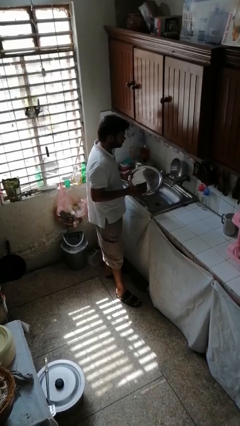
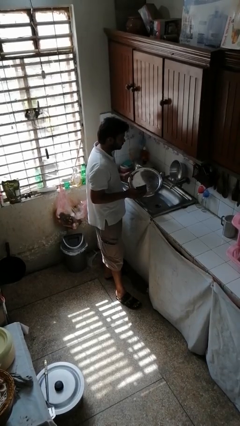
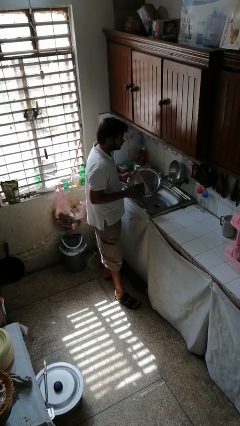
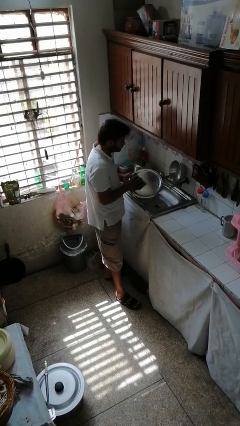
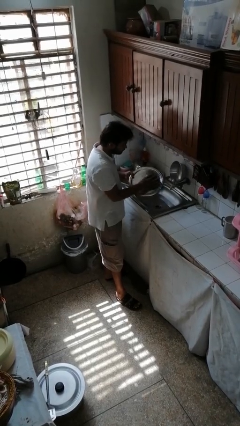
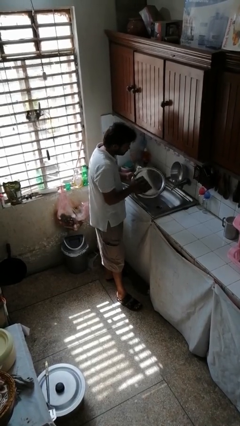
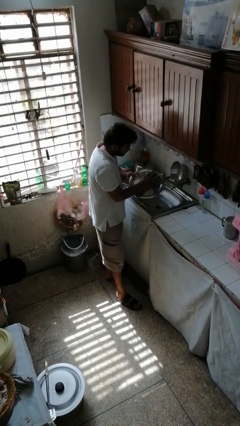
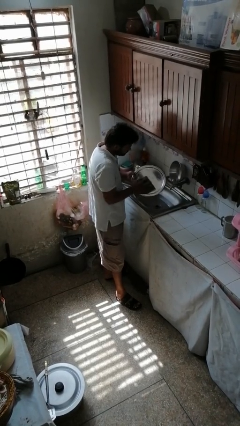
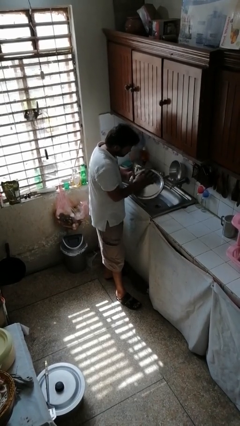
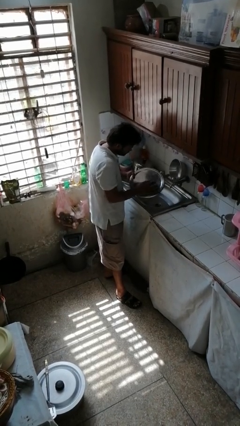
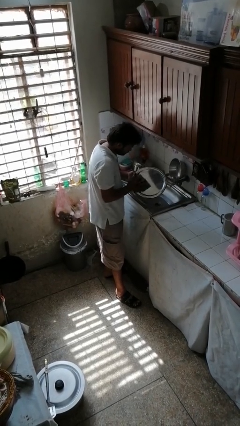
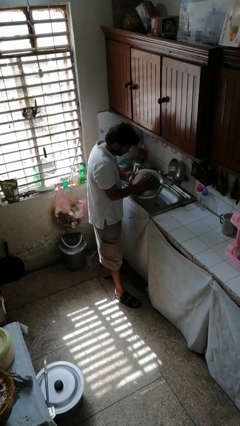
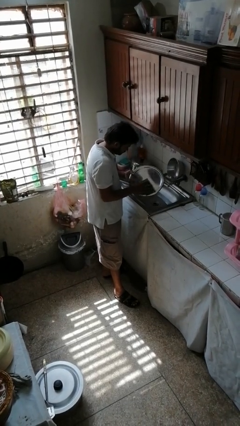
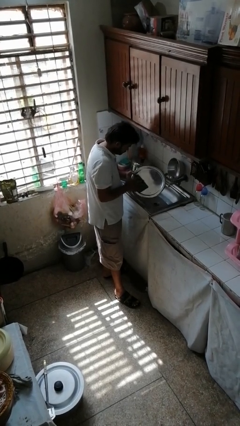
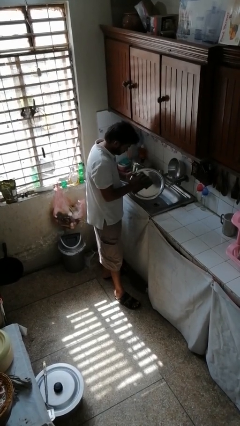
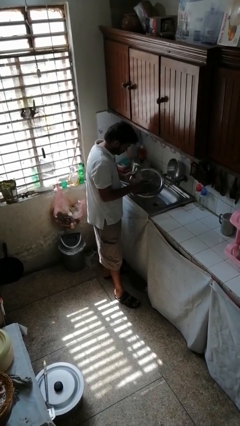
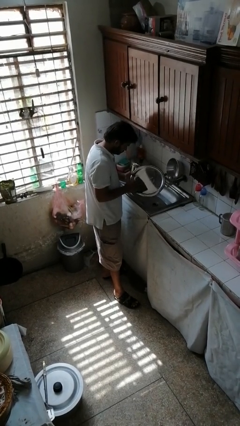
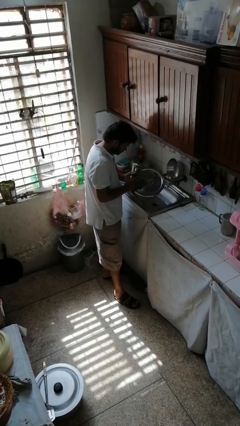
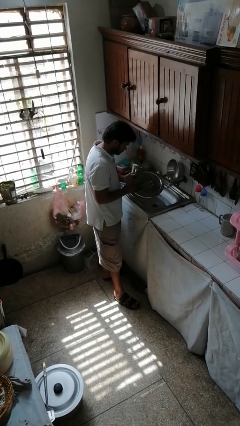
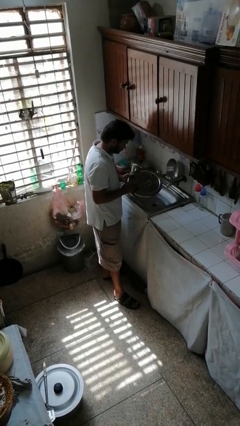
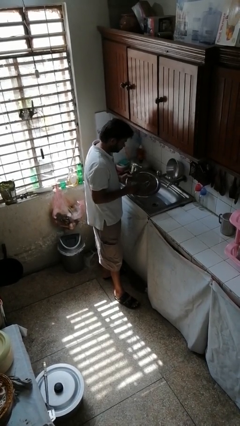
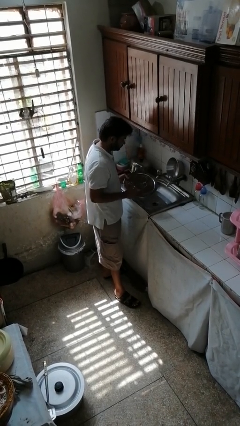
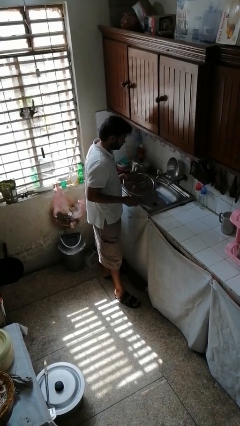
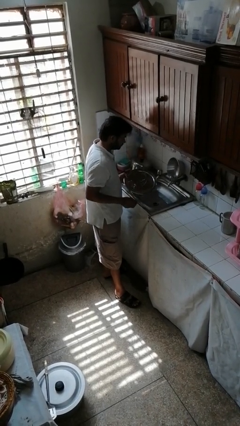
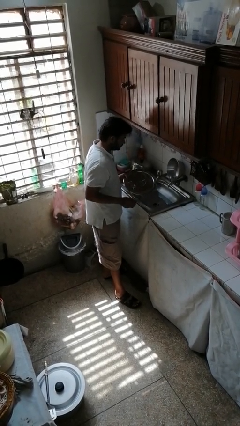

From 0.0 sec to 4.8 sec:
person washes dish

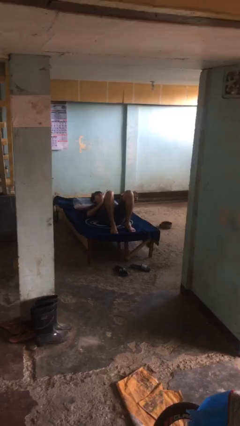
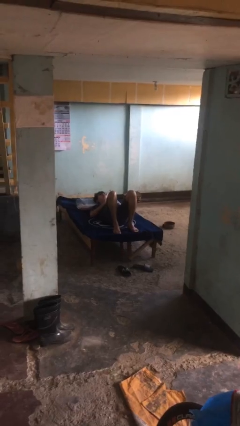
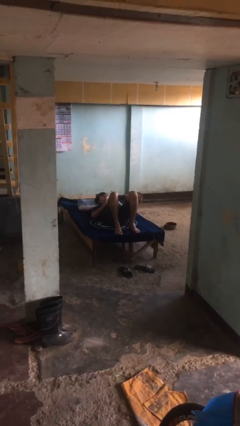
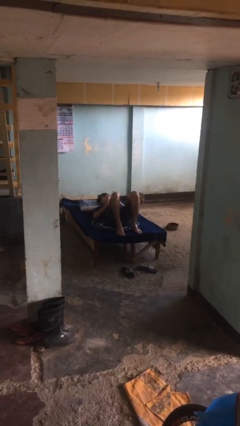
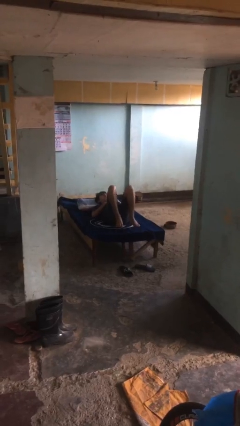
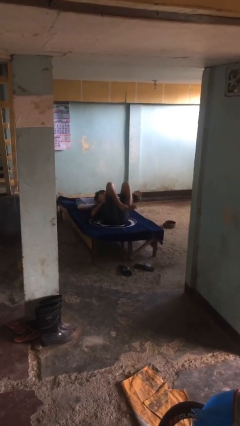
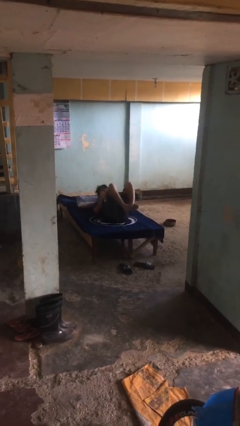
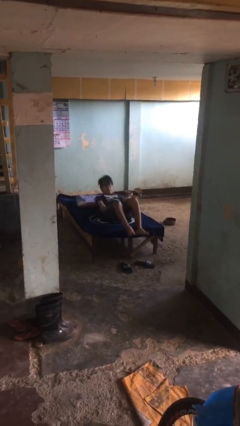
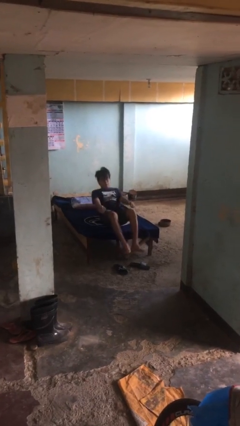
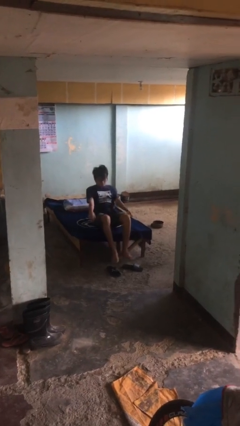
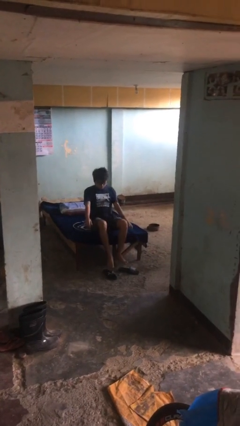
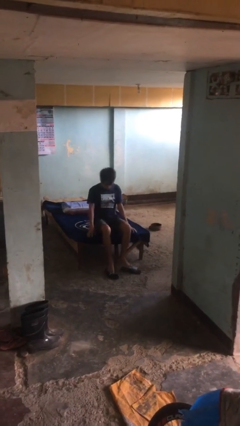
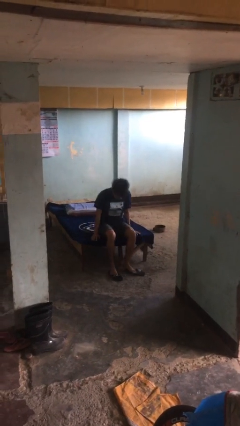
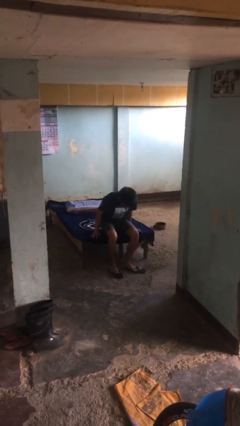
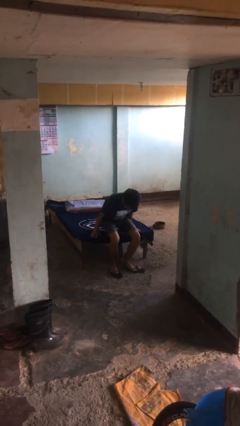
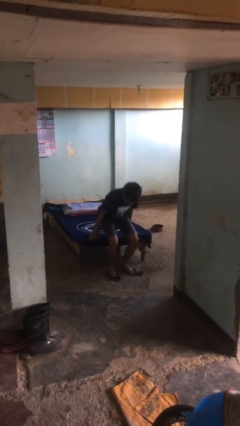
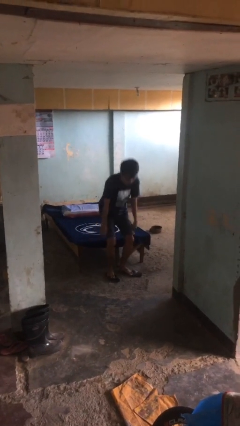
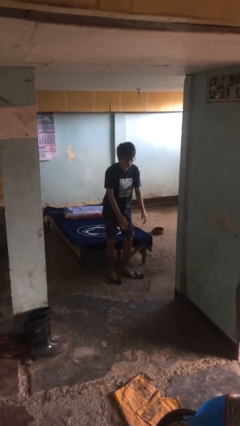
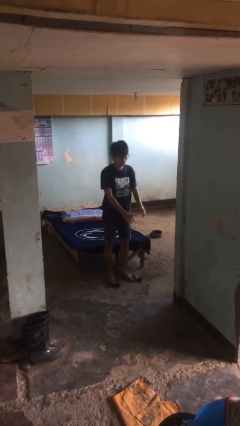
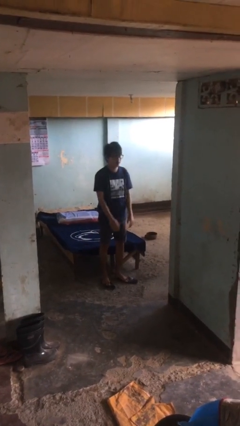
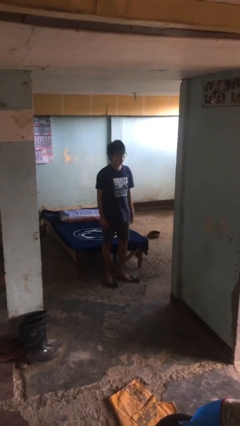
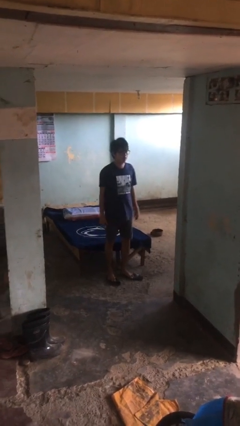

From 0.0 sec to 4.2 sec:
person stands up

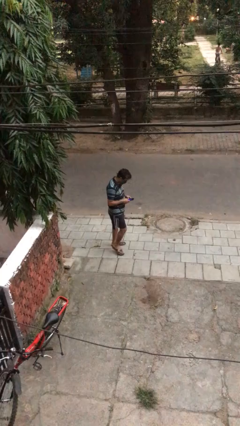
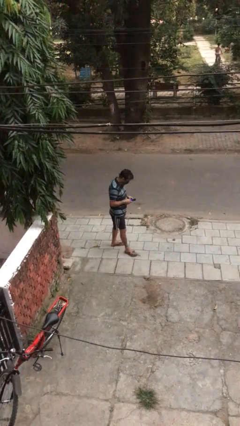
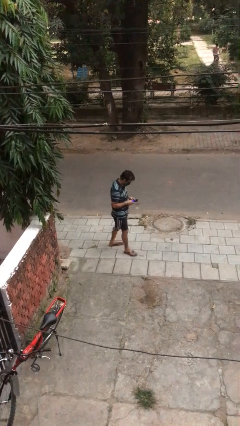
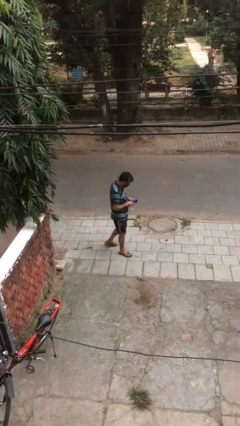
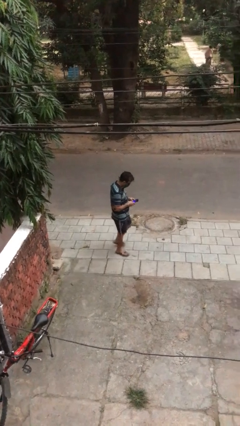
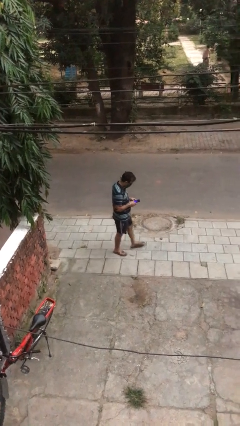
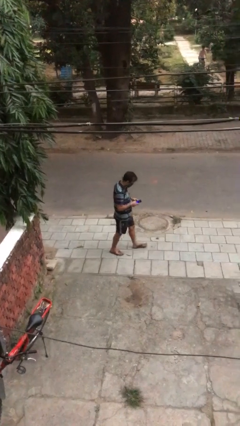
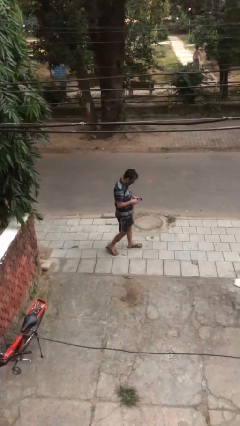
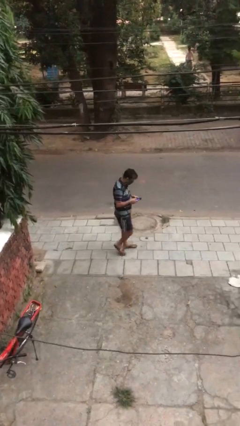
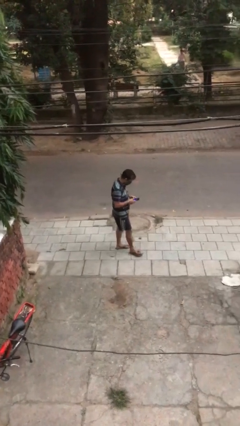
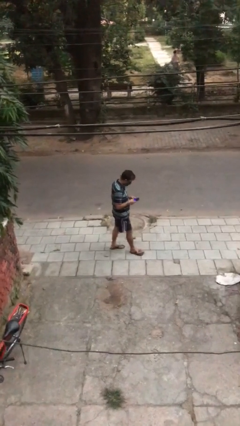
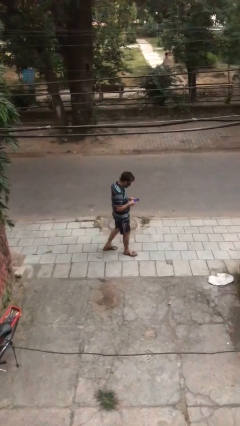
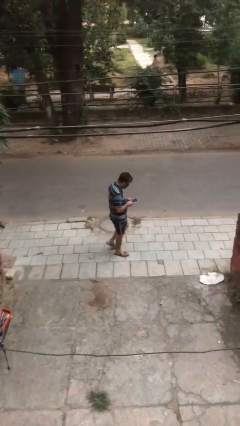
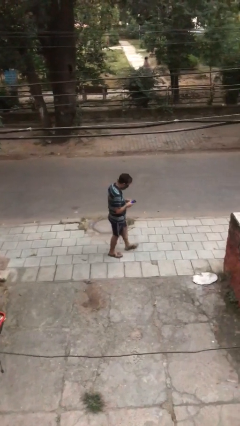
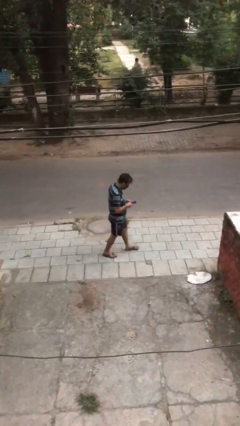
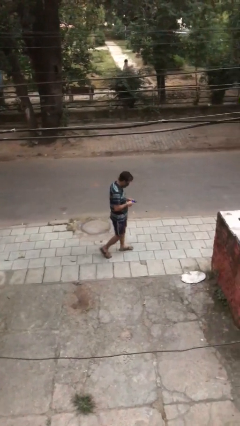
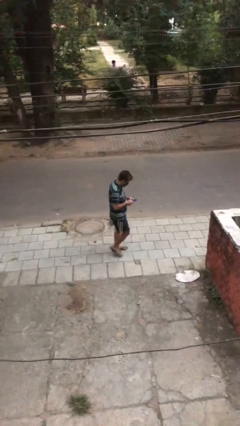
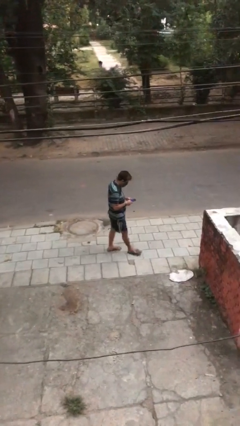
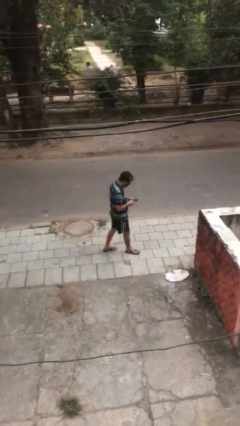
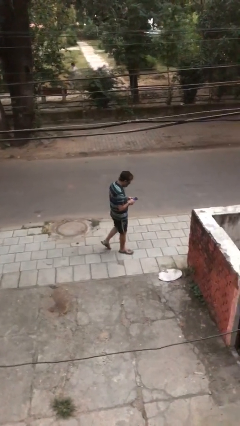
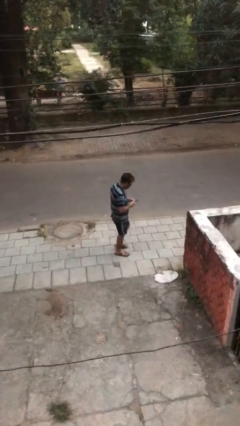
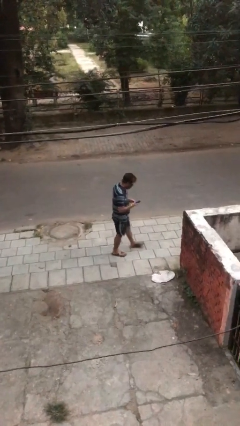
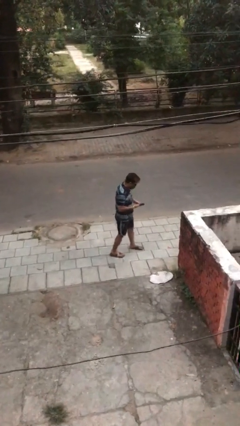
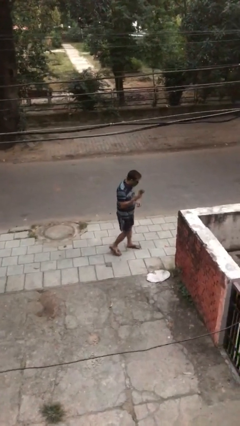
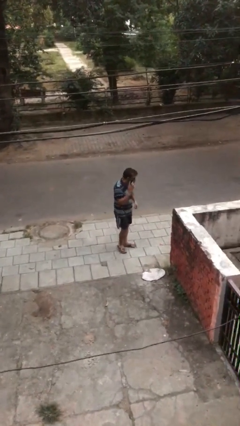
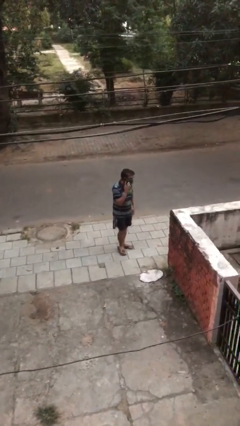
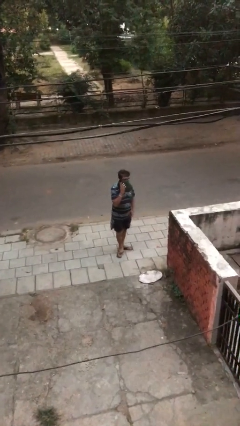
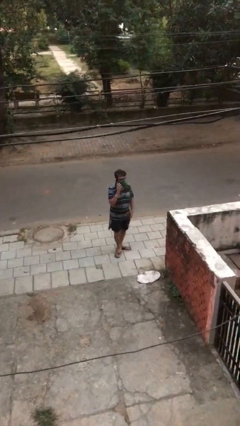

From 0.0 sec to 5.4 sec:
person texts on phone

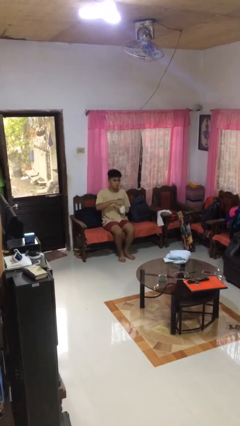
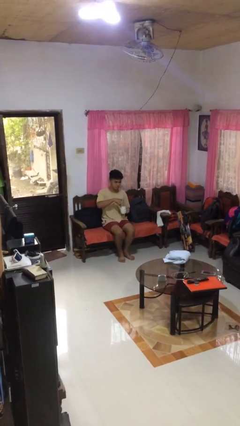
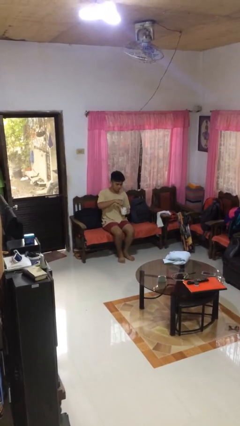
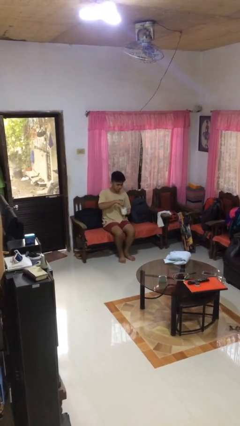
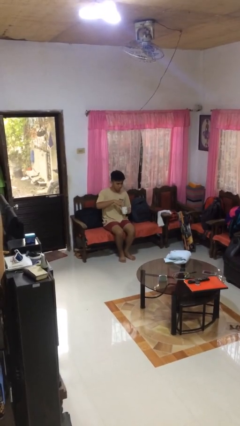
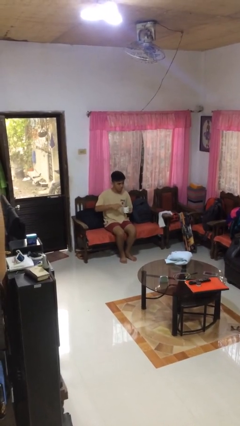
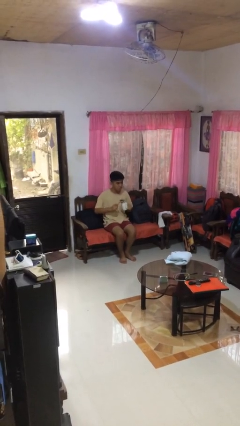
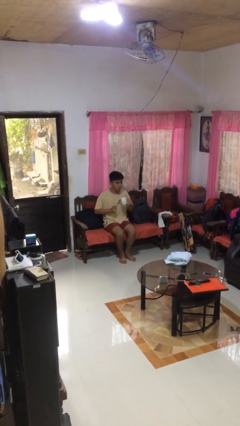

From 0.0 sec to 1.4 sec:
person stirs mug

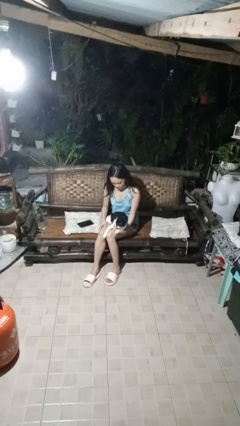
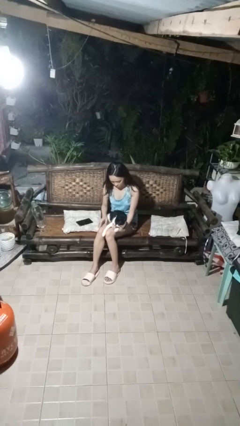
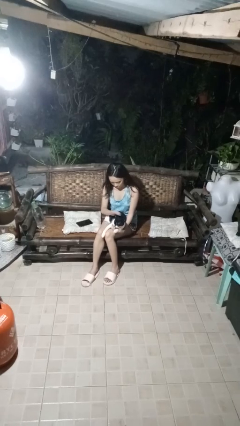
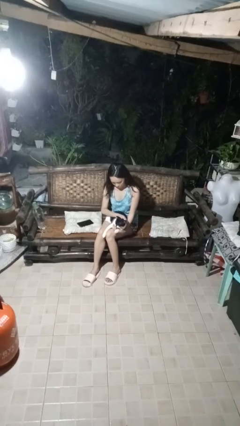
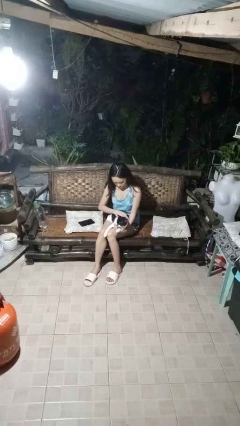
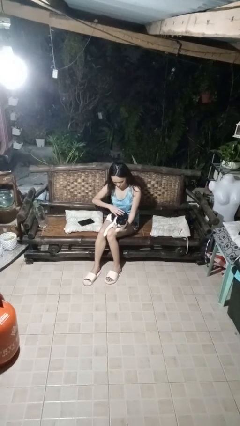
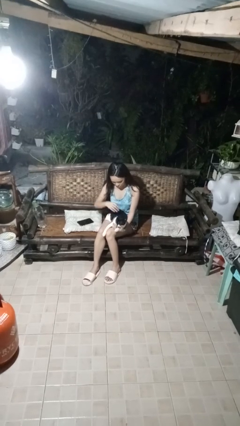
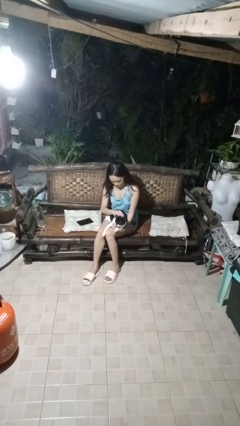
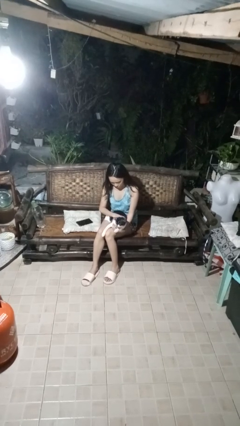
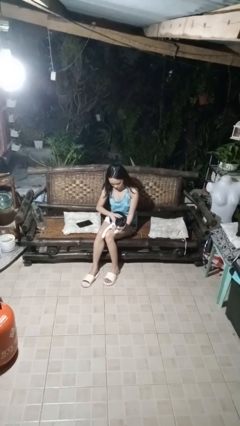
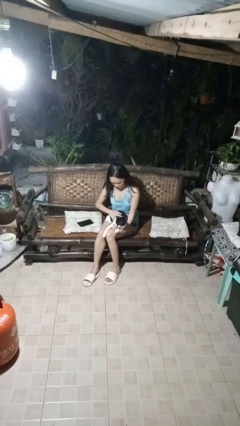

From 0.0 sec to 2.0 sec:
person pets cat
